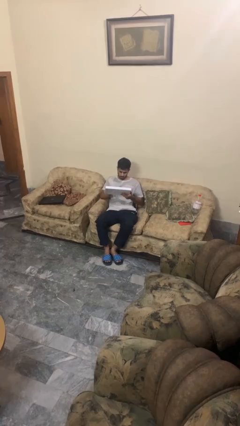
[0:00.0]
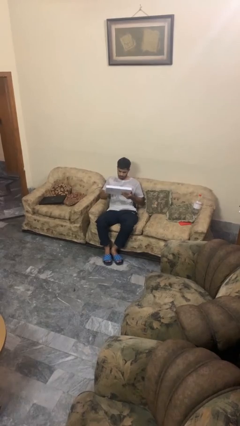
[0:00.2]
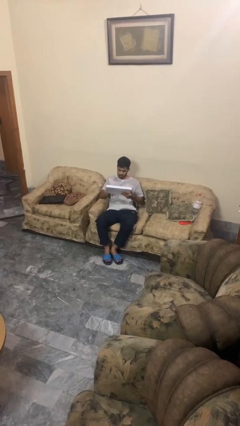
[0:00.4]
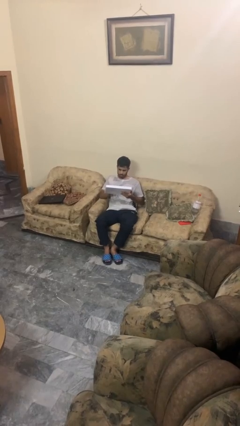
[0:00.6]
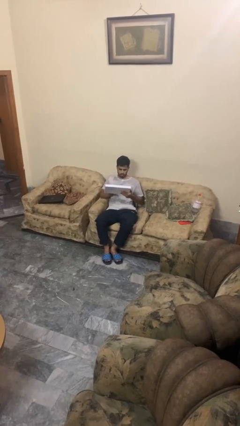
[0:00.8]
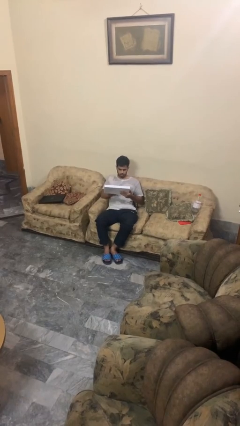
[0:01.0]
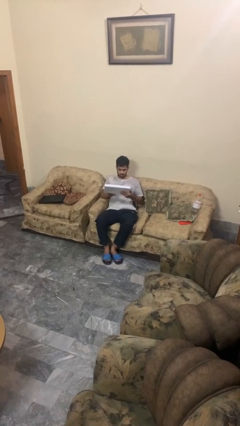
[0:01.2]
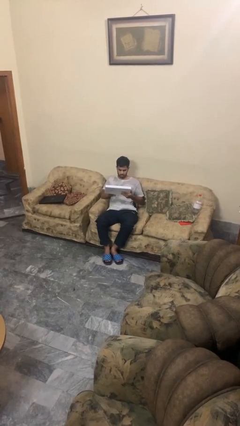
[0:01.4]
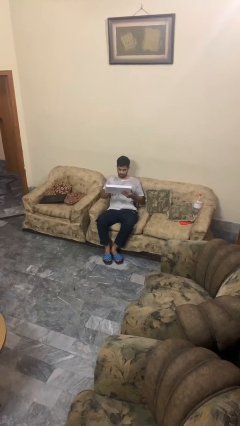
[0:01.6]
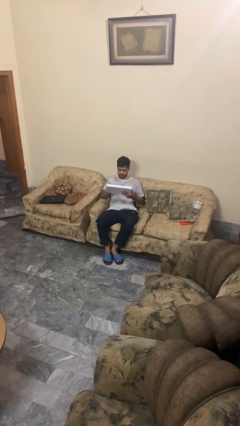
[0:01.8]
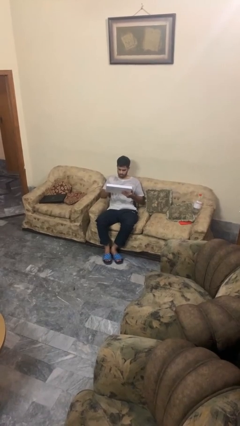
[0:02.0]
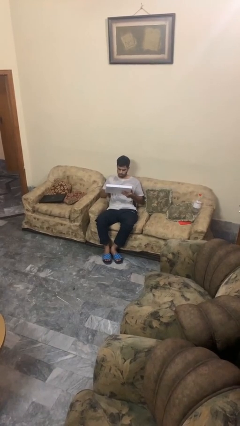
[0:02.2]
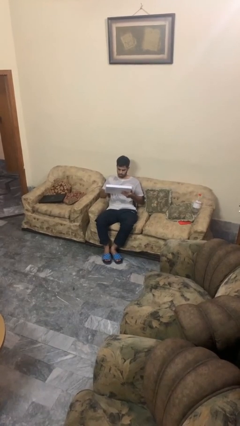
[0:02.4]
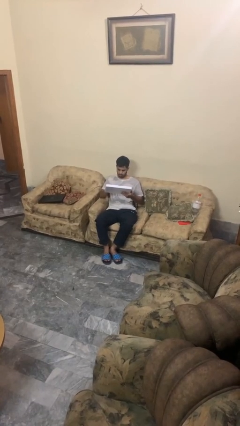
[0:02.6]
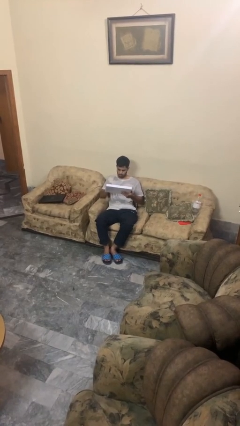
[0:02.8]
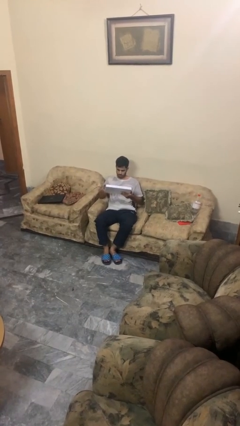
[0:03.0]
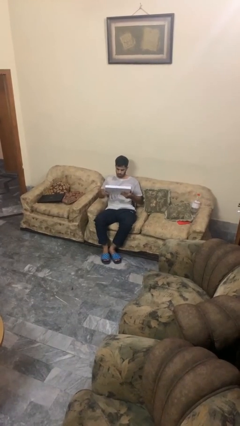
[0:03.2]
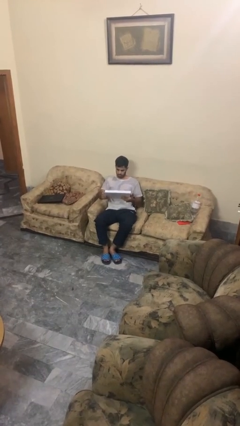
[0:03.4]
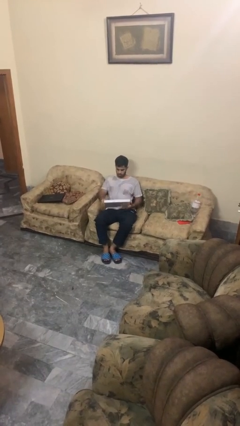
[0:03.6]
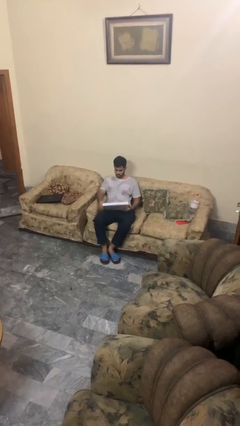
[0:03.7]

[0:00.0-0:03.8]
person interacts with tablet

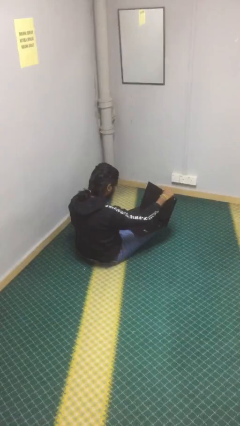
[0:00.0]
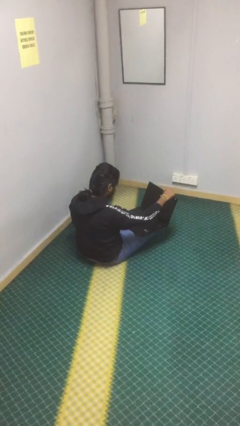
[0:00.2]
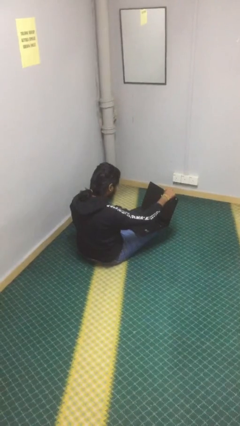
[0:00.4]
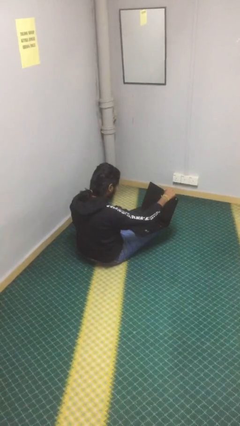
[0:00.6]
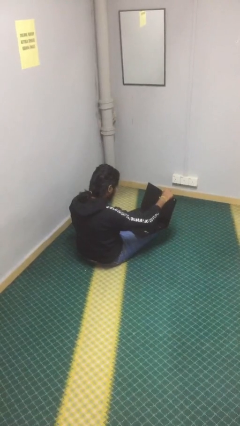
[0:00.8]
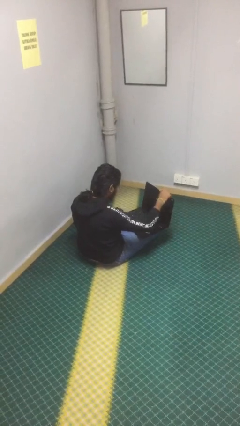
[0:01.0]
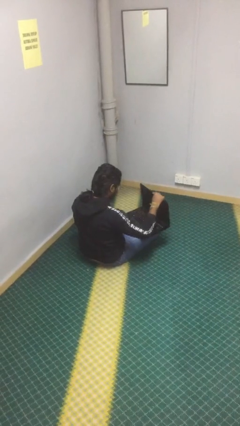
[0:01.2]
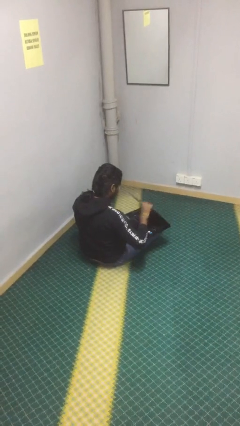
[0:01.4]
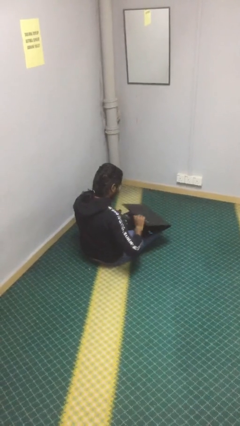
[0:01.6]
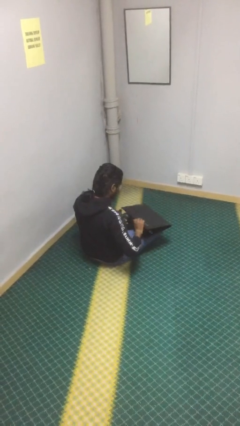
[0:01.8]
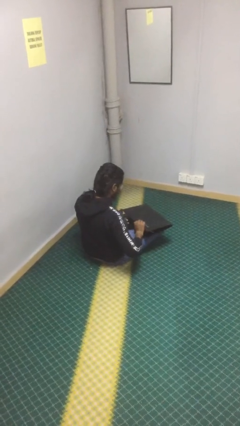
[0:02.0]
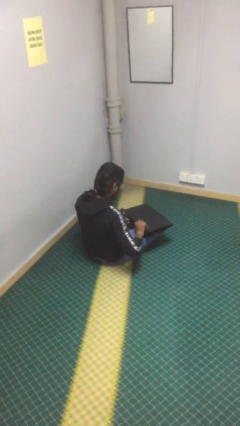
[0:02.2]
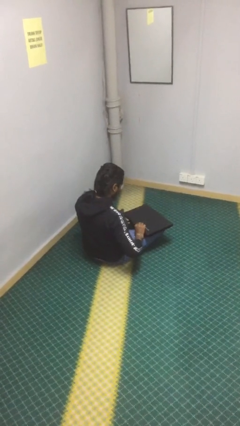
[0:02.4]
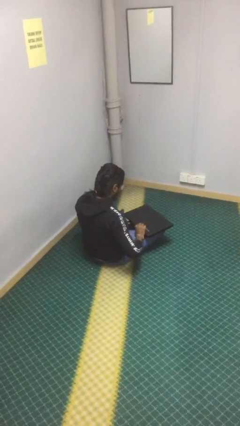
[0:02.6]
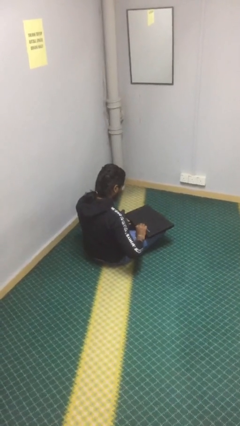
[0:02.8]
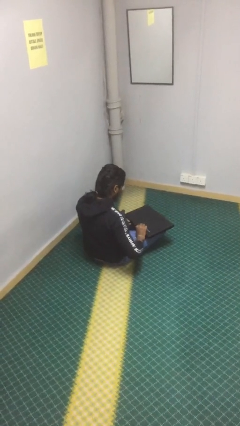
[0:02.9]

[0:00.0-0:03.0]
person closes laptop

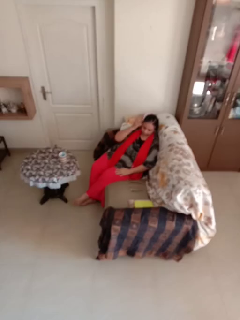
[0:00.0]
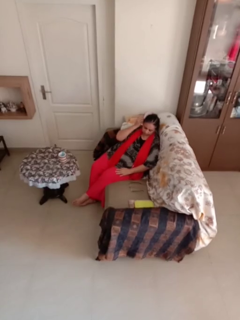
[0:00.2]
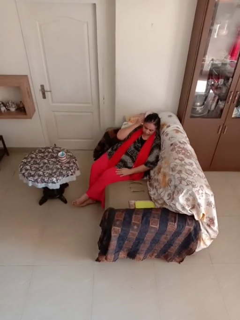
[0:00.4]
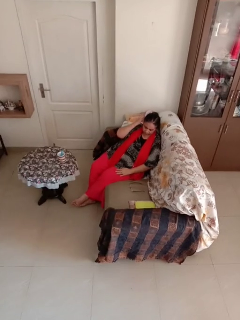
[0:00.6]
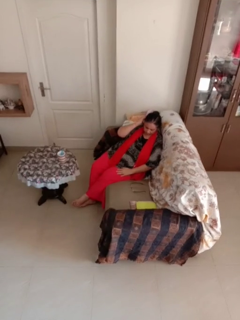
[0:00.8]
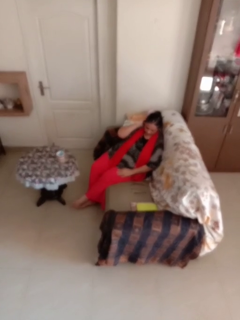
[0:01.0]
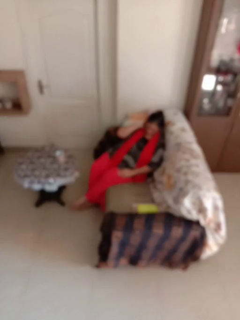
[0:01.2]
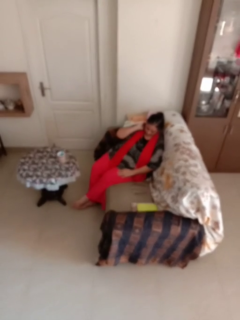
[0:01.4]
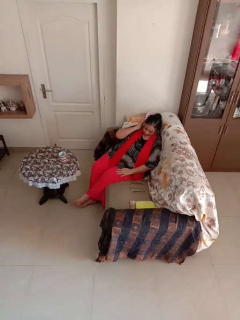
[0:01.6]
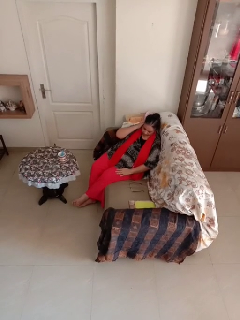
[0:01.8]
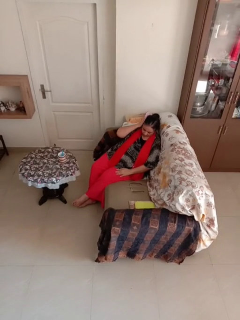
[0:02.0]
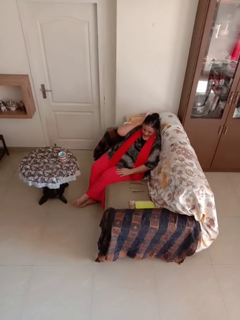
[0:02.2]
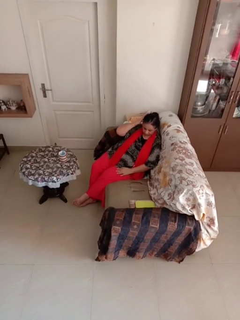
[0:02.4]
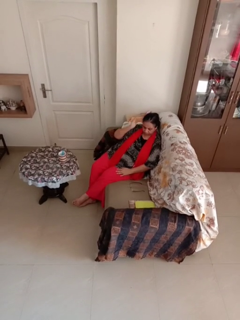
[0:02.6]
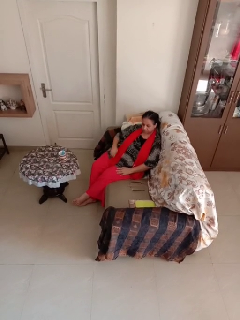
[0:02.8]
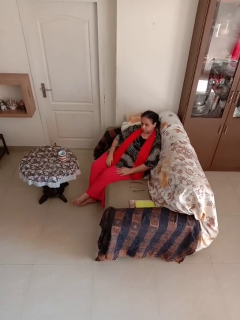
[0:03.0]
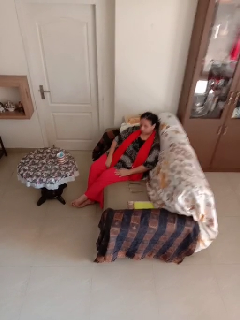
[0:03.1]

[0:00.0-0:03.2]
person strokes hair

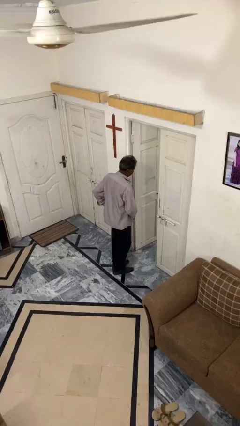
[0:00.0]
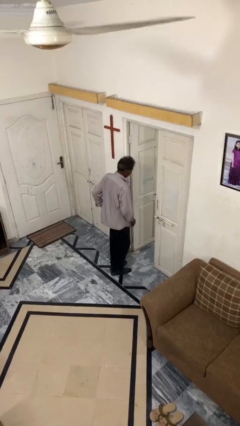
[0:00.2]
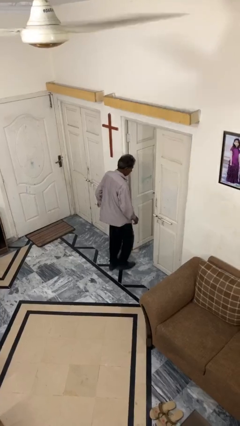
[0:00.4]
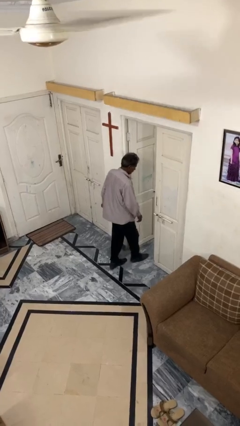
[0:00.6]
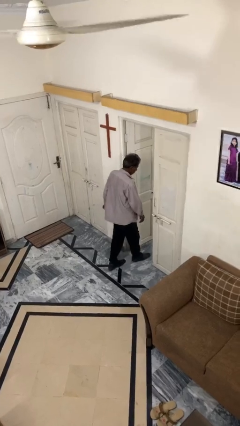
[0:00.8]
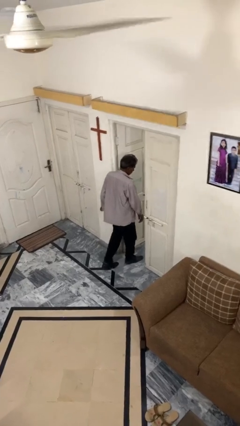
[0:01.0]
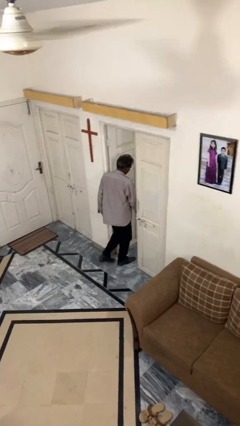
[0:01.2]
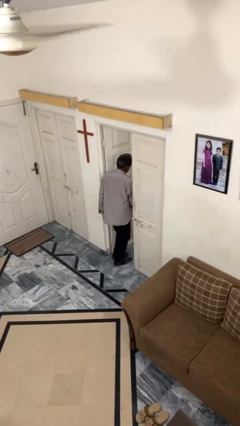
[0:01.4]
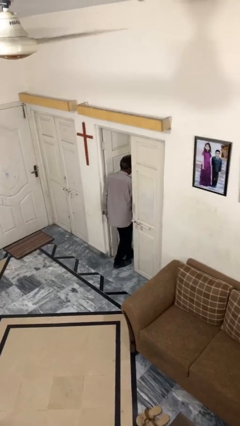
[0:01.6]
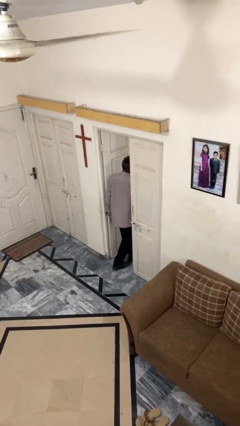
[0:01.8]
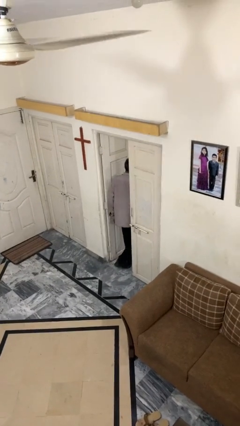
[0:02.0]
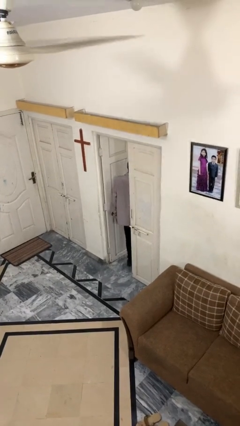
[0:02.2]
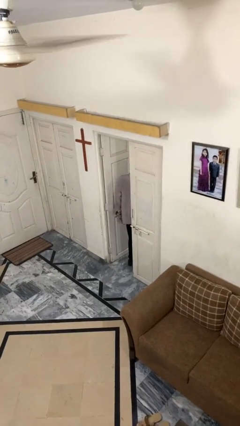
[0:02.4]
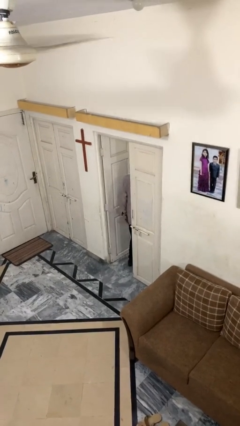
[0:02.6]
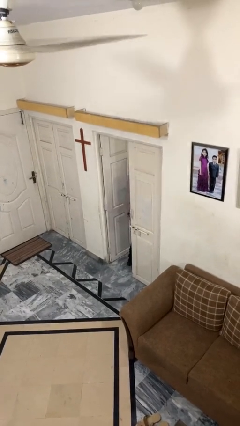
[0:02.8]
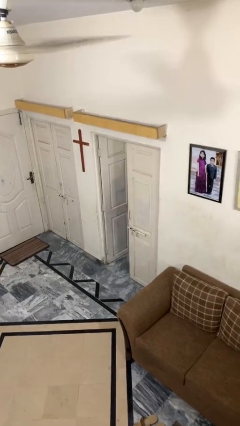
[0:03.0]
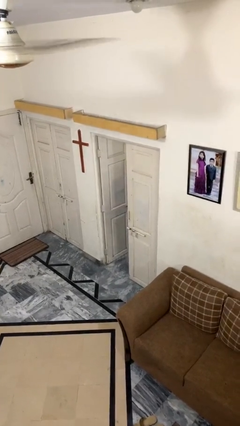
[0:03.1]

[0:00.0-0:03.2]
person exits scene through structure

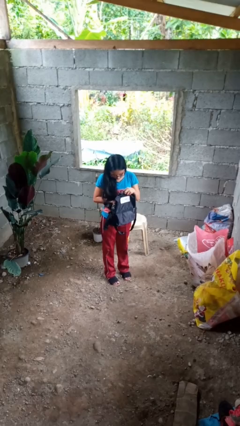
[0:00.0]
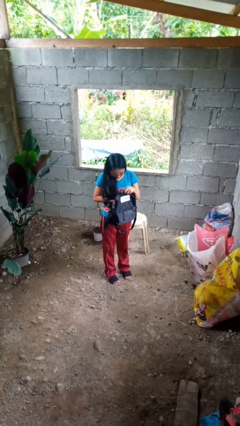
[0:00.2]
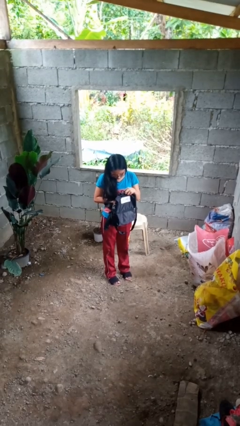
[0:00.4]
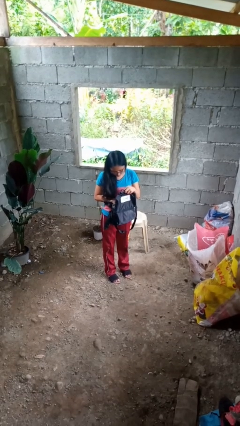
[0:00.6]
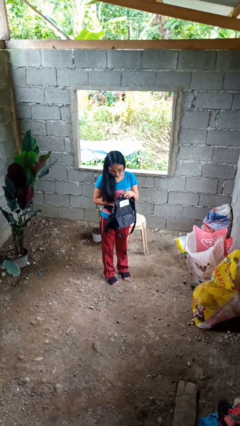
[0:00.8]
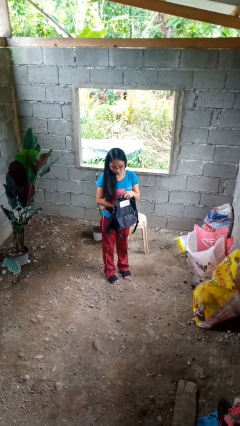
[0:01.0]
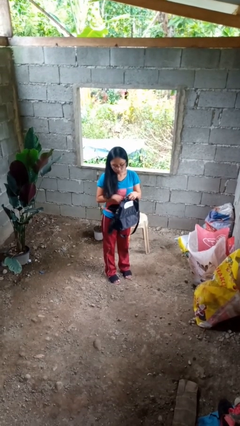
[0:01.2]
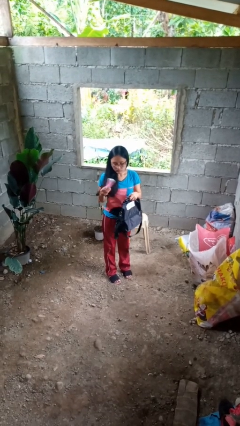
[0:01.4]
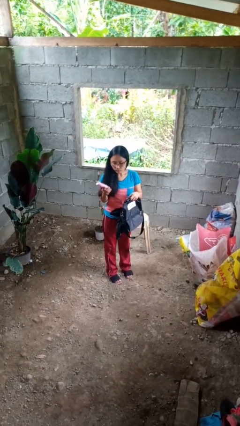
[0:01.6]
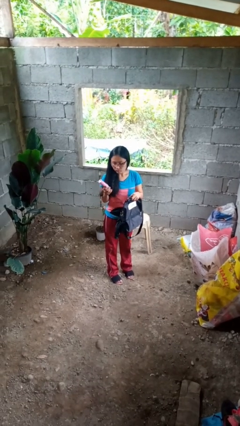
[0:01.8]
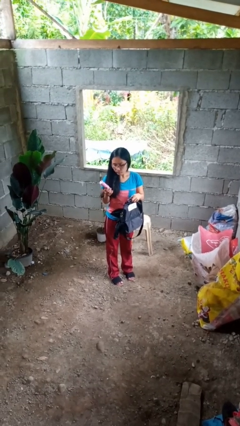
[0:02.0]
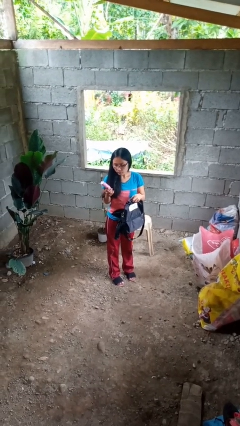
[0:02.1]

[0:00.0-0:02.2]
person takes object from backpack

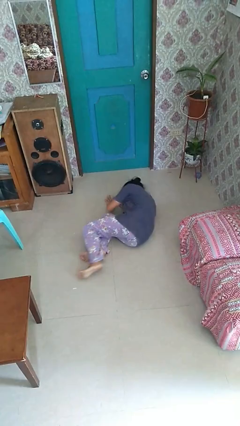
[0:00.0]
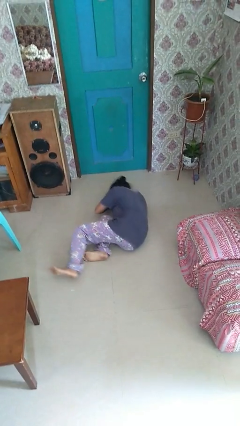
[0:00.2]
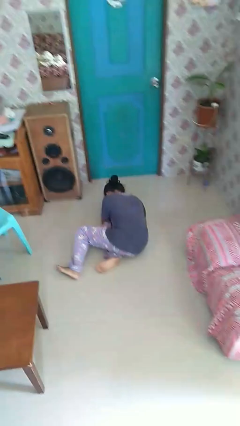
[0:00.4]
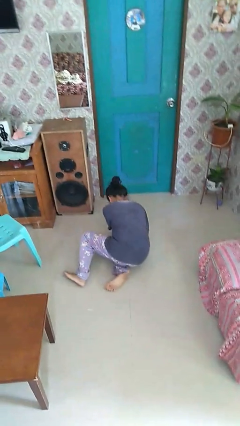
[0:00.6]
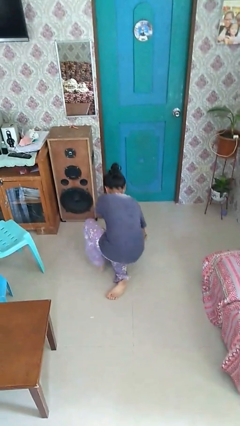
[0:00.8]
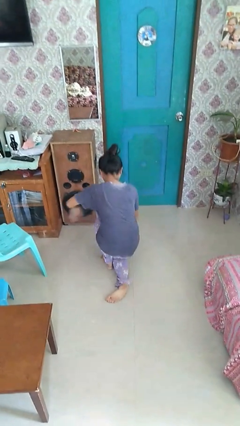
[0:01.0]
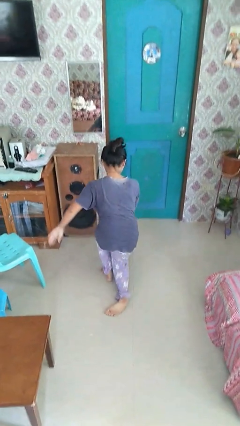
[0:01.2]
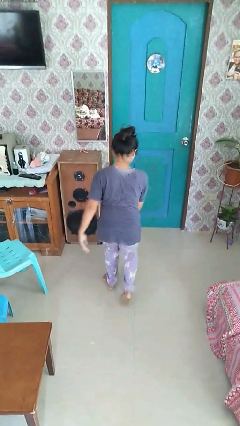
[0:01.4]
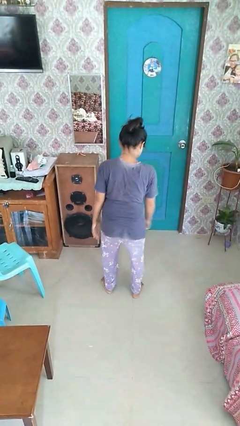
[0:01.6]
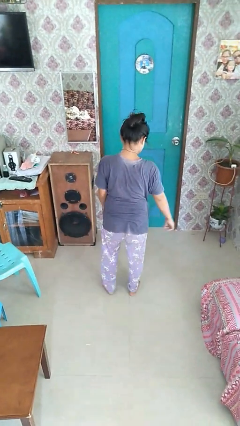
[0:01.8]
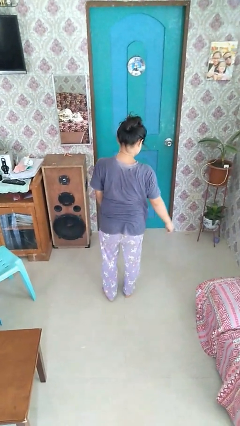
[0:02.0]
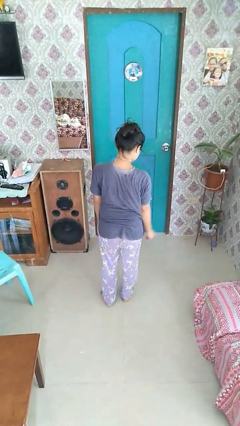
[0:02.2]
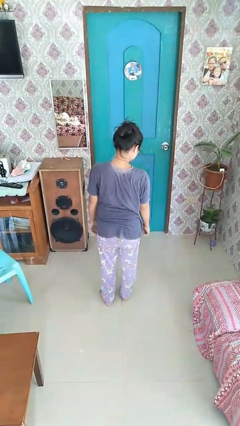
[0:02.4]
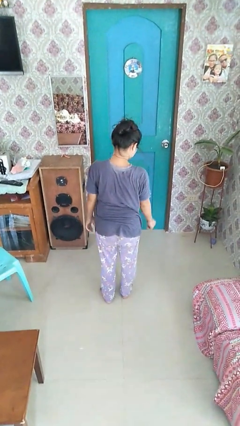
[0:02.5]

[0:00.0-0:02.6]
person stands up from floor
